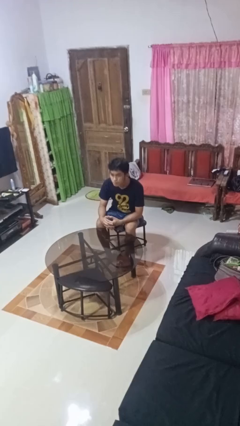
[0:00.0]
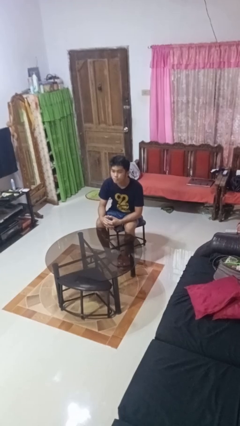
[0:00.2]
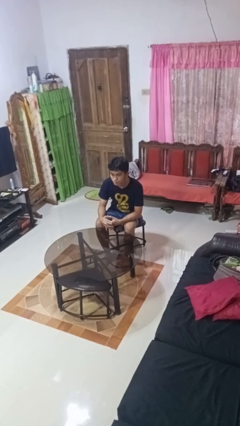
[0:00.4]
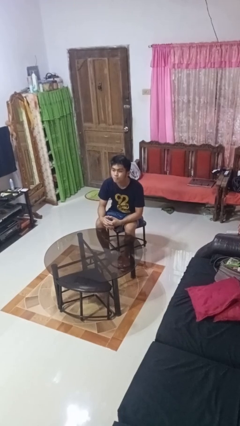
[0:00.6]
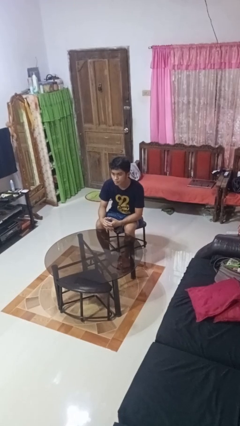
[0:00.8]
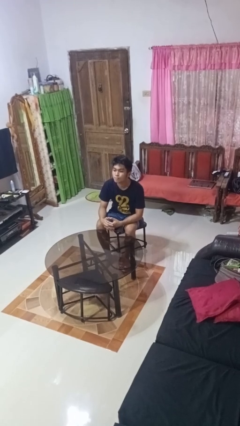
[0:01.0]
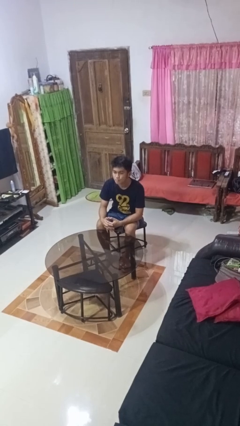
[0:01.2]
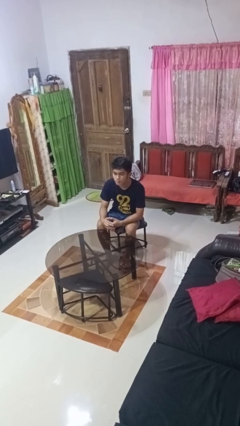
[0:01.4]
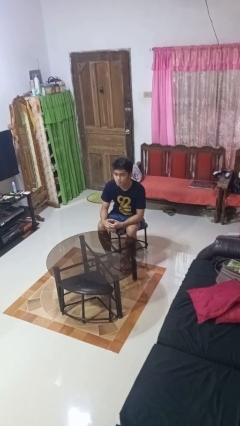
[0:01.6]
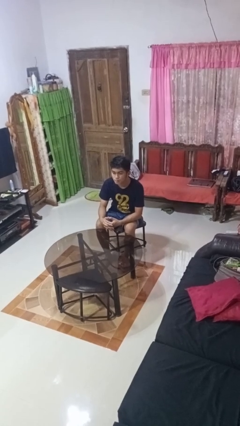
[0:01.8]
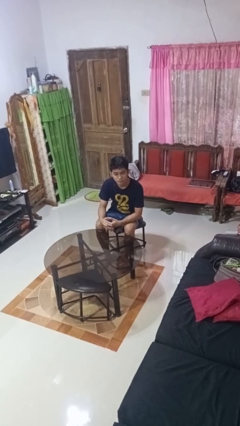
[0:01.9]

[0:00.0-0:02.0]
person nods head

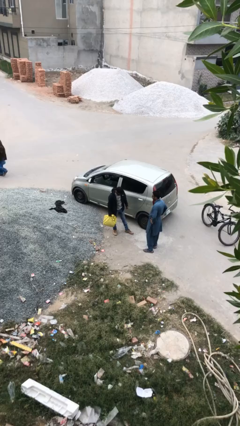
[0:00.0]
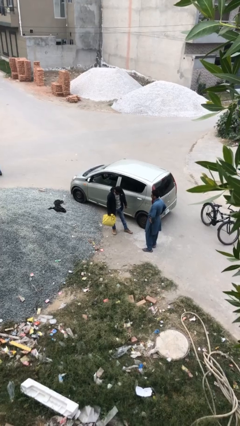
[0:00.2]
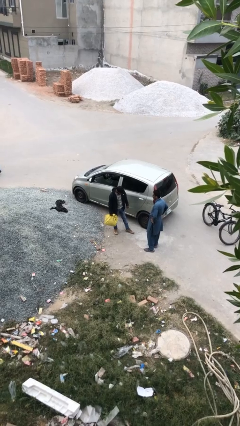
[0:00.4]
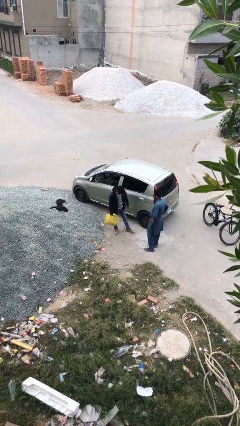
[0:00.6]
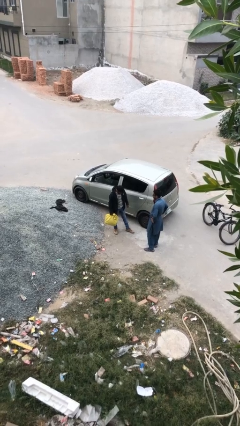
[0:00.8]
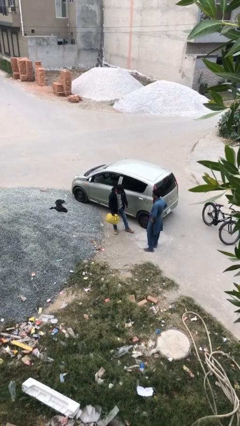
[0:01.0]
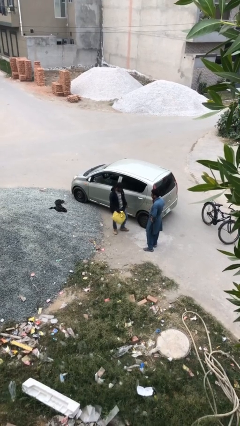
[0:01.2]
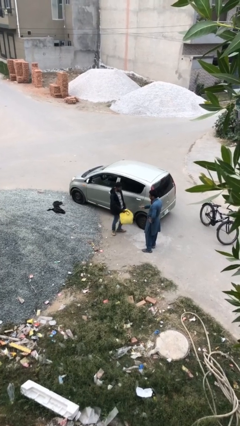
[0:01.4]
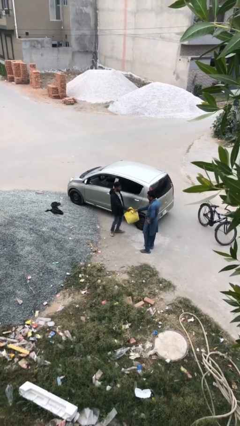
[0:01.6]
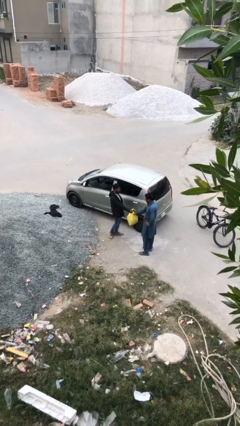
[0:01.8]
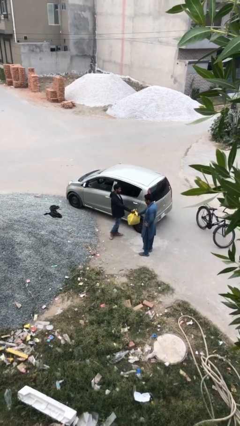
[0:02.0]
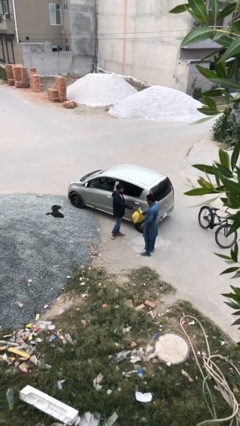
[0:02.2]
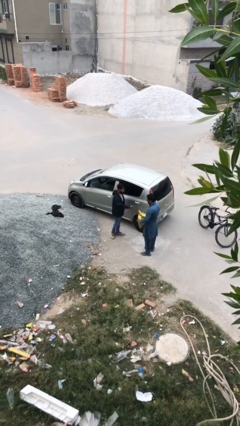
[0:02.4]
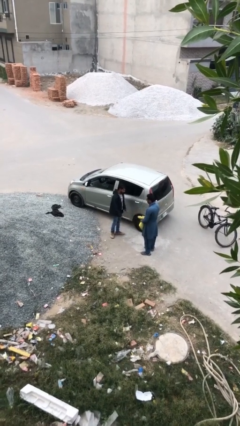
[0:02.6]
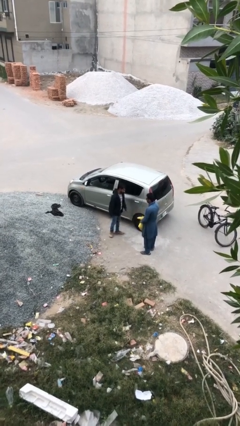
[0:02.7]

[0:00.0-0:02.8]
person transfers object to person

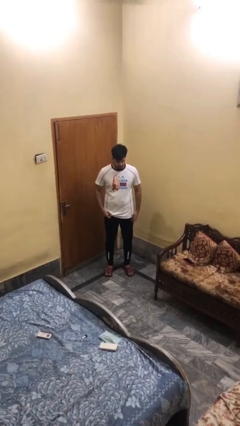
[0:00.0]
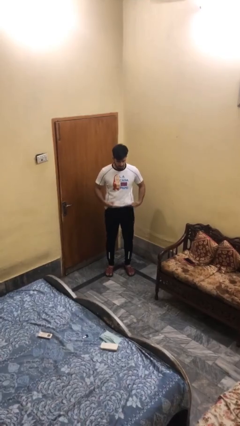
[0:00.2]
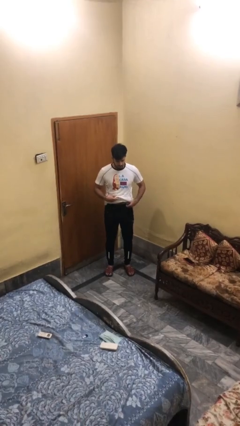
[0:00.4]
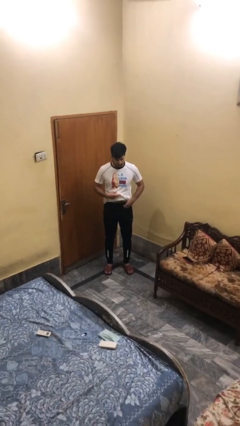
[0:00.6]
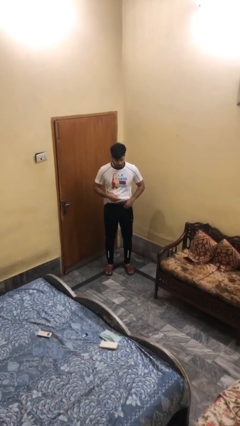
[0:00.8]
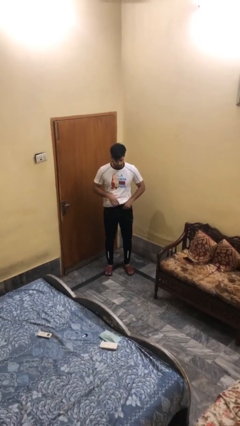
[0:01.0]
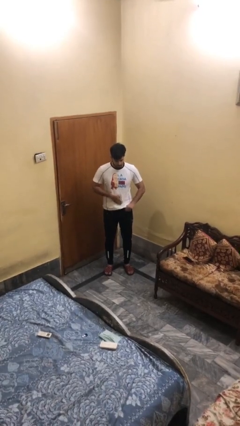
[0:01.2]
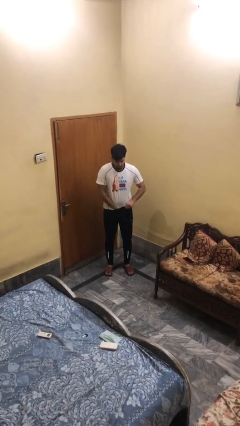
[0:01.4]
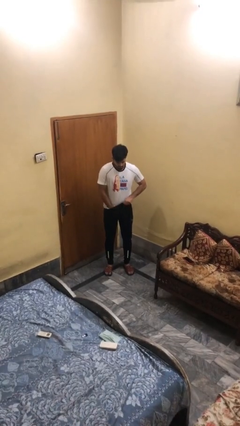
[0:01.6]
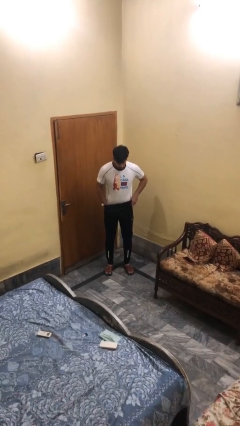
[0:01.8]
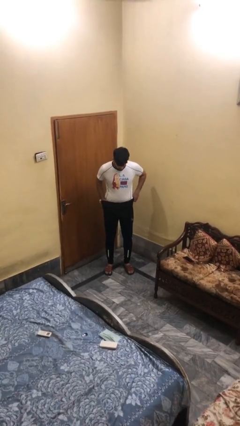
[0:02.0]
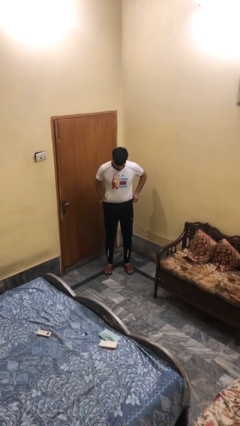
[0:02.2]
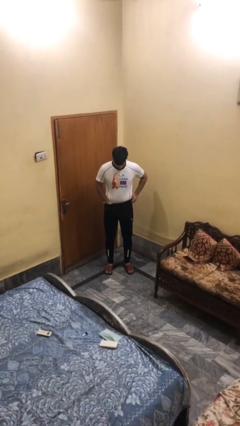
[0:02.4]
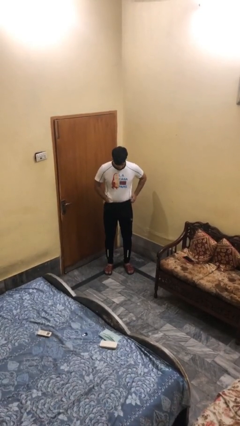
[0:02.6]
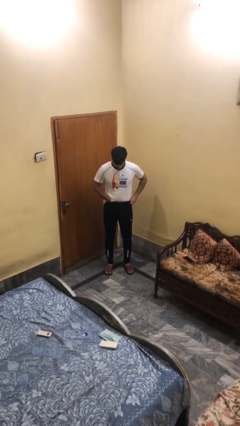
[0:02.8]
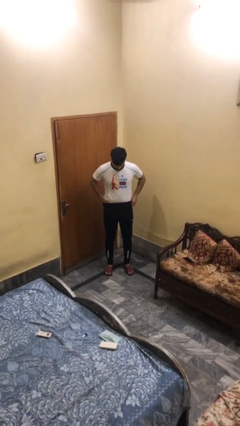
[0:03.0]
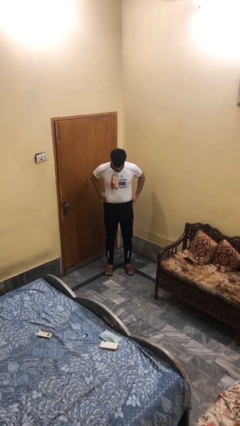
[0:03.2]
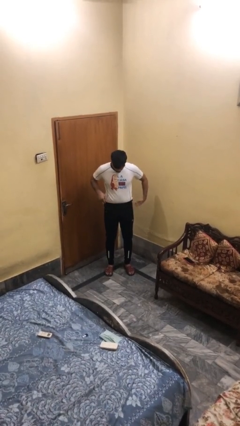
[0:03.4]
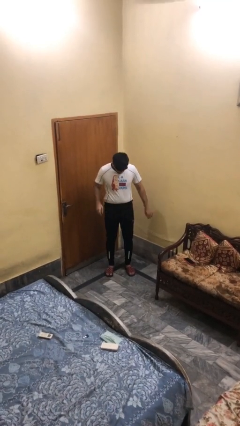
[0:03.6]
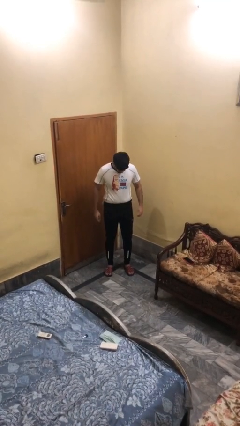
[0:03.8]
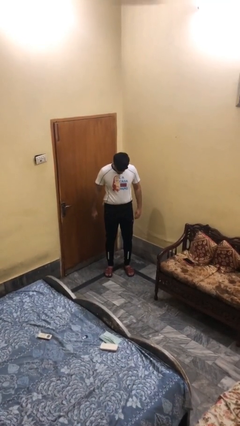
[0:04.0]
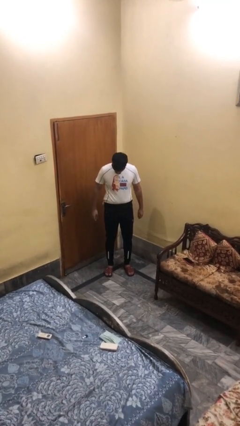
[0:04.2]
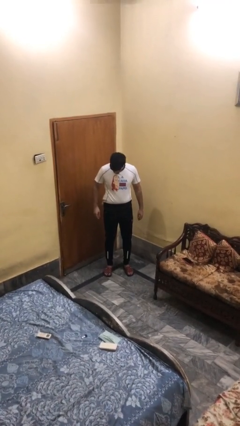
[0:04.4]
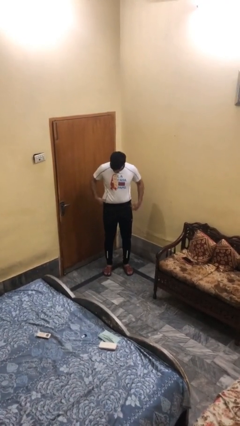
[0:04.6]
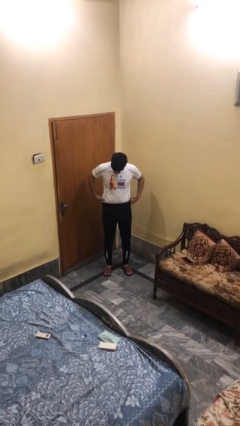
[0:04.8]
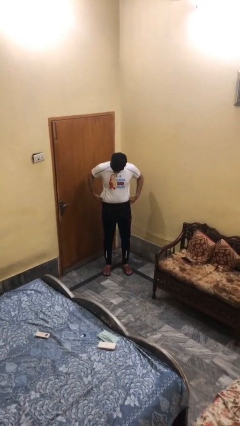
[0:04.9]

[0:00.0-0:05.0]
person tucks in shirt

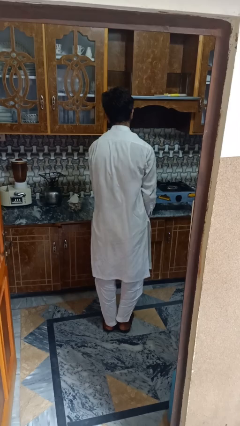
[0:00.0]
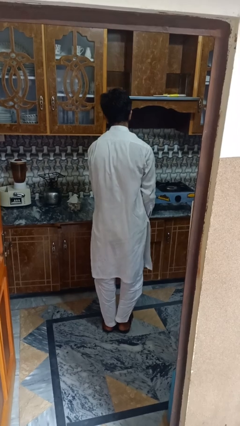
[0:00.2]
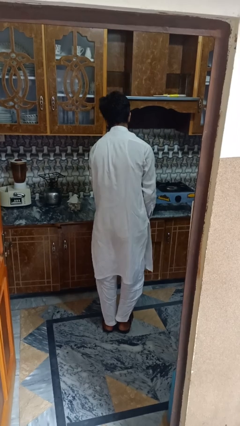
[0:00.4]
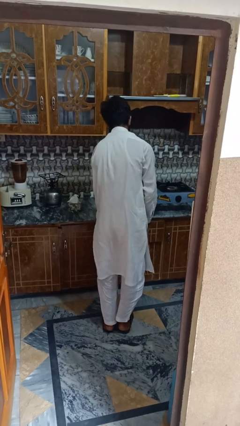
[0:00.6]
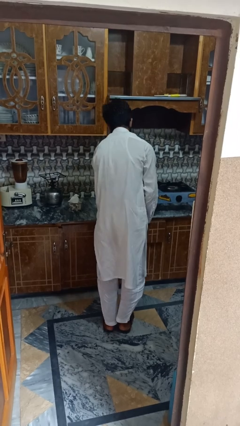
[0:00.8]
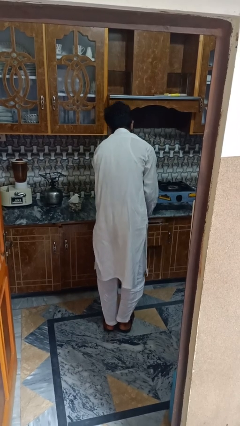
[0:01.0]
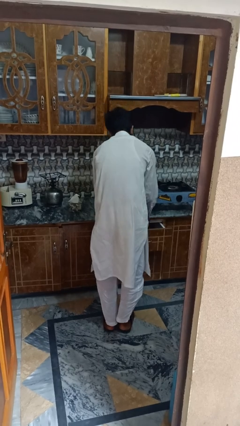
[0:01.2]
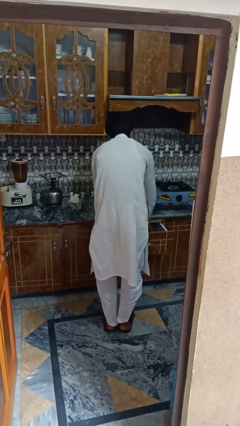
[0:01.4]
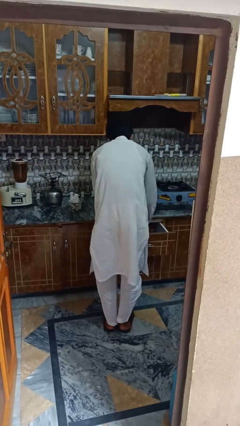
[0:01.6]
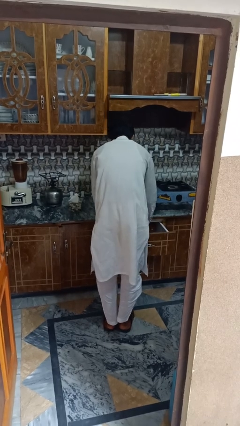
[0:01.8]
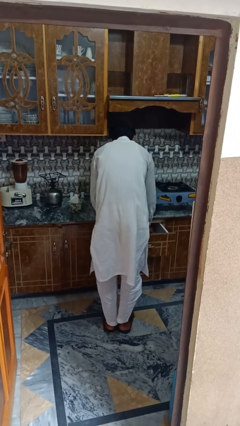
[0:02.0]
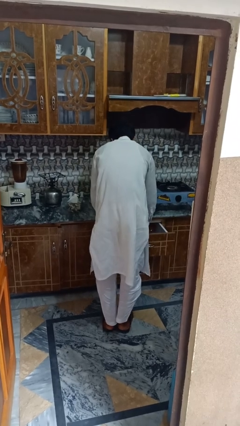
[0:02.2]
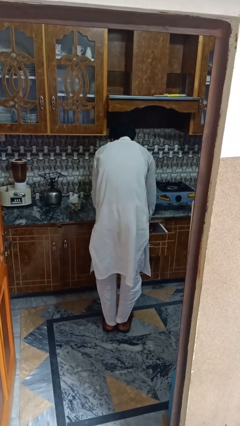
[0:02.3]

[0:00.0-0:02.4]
person searches in kitchen drawer

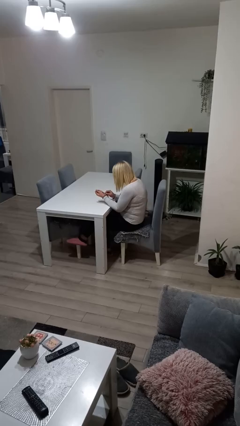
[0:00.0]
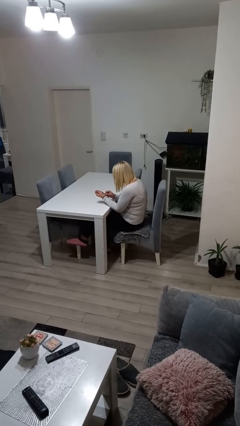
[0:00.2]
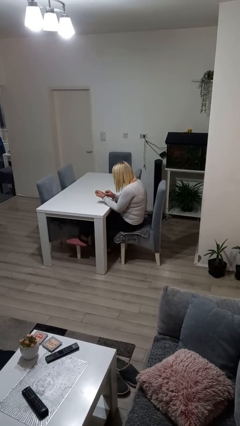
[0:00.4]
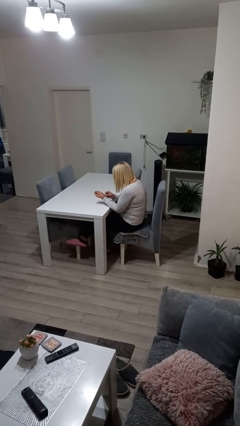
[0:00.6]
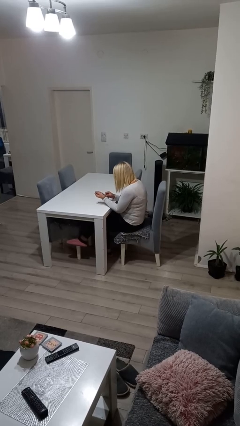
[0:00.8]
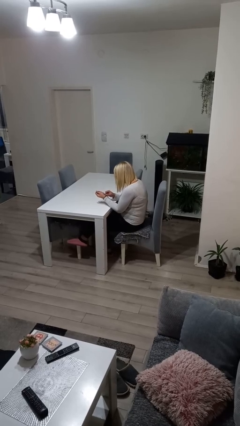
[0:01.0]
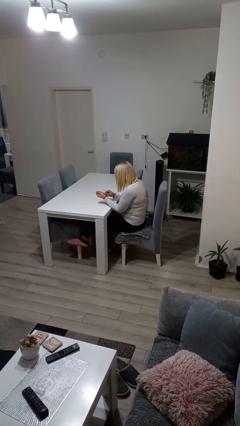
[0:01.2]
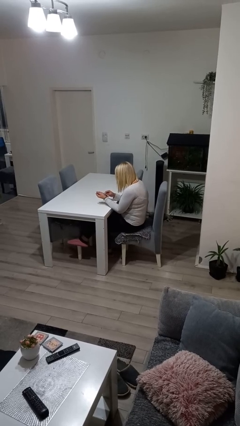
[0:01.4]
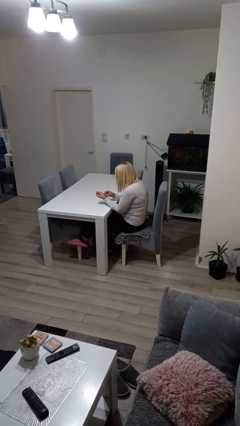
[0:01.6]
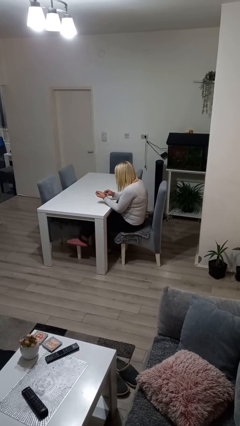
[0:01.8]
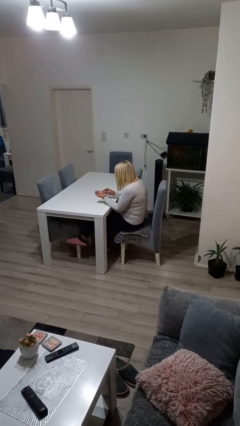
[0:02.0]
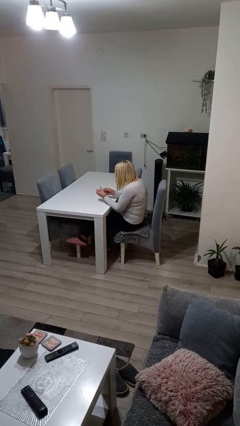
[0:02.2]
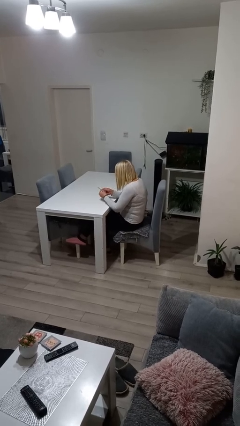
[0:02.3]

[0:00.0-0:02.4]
person files fingernails

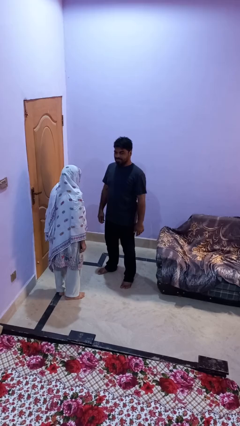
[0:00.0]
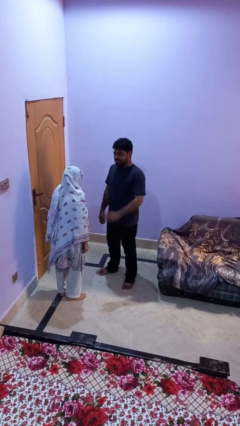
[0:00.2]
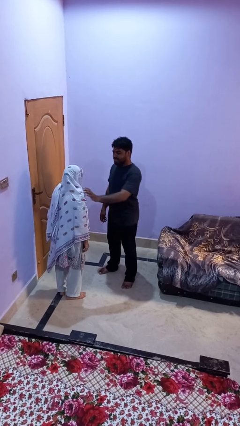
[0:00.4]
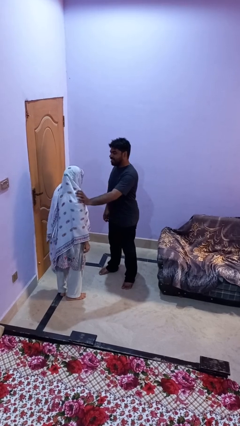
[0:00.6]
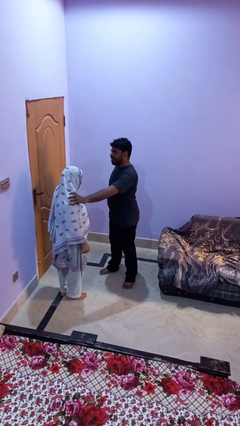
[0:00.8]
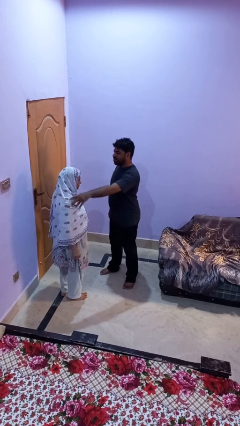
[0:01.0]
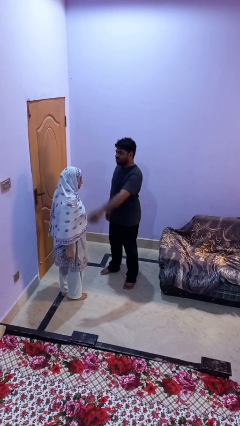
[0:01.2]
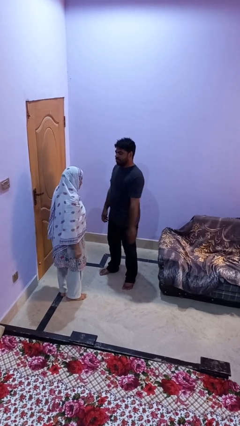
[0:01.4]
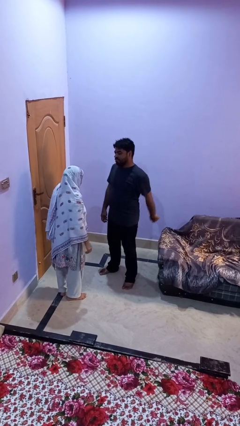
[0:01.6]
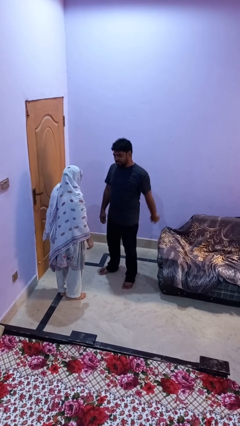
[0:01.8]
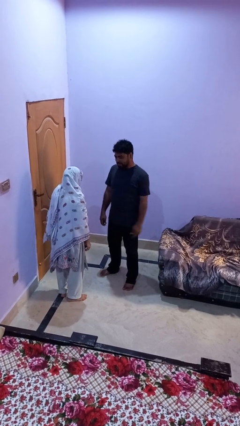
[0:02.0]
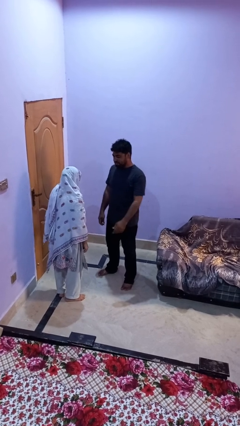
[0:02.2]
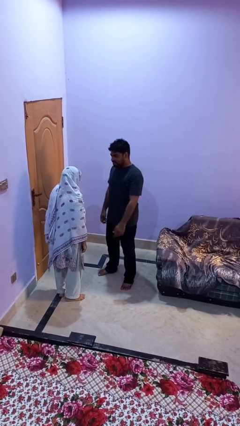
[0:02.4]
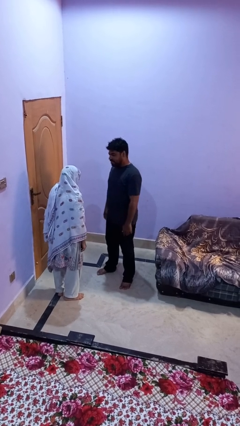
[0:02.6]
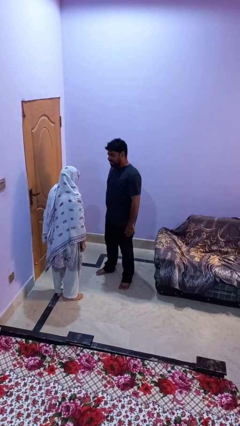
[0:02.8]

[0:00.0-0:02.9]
person shoves person

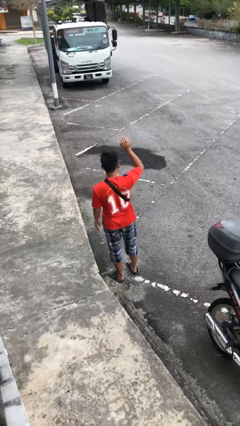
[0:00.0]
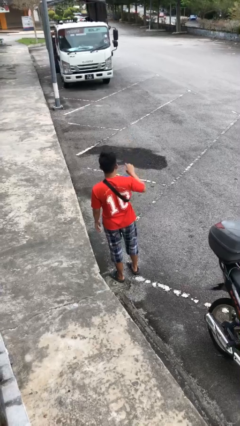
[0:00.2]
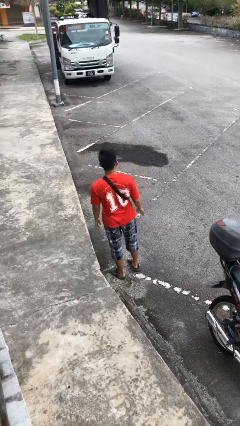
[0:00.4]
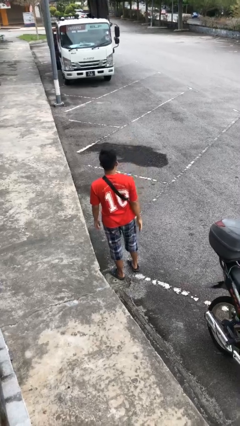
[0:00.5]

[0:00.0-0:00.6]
person gestures lower hand
